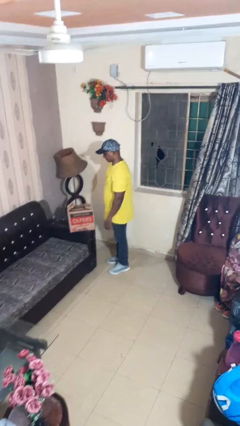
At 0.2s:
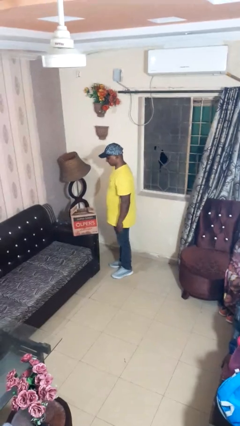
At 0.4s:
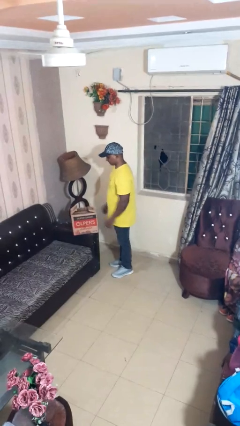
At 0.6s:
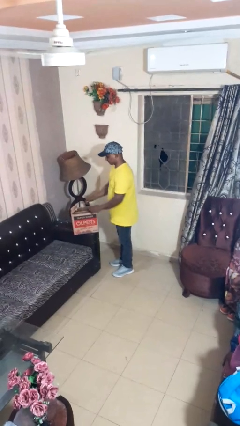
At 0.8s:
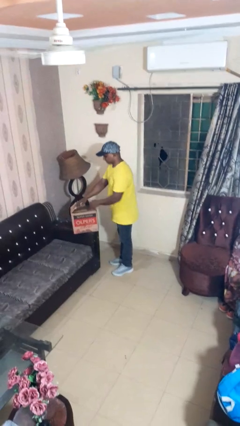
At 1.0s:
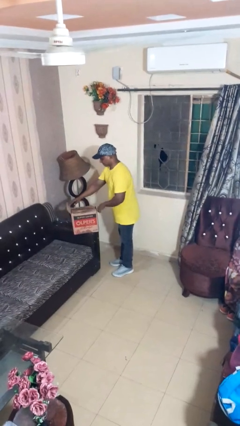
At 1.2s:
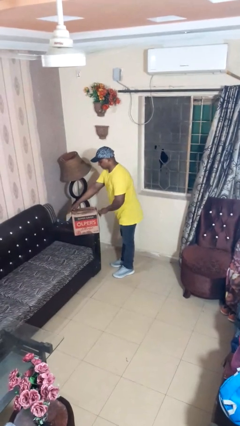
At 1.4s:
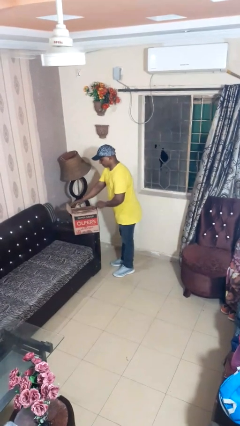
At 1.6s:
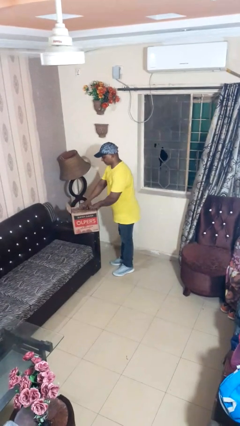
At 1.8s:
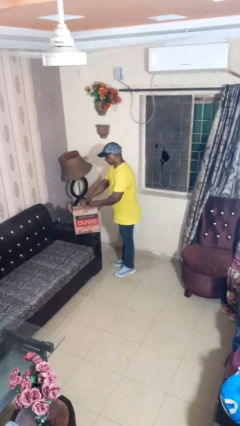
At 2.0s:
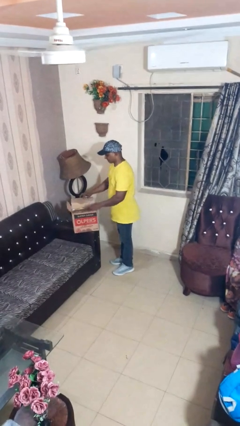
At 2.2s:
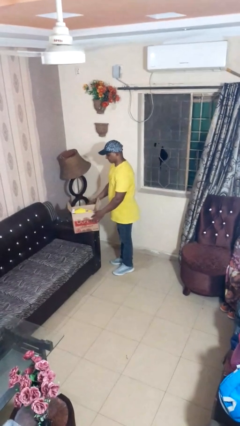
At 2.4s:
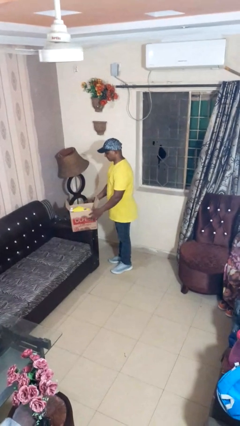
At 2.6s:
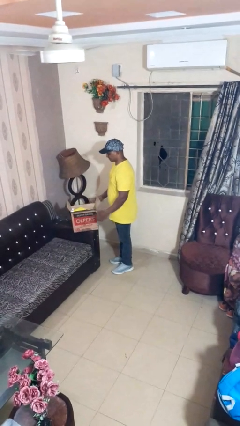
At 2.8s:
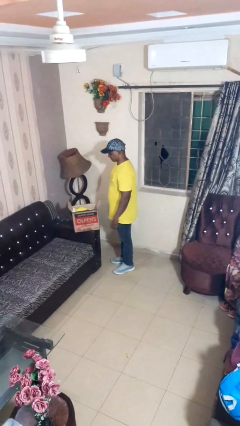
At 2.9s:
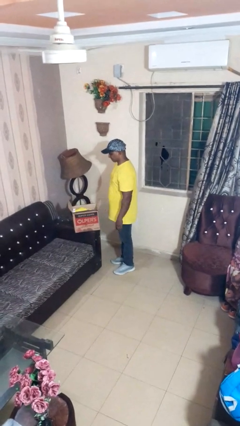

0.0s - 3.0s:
person opens box

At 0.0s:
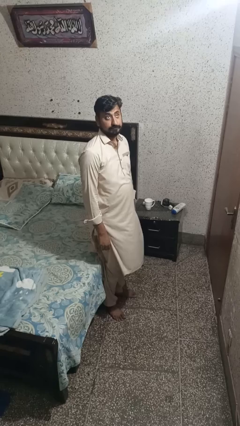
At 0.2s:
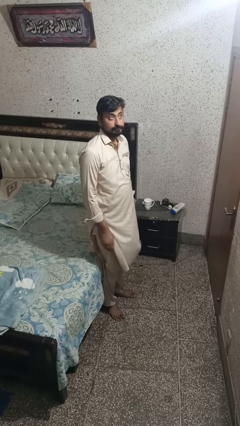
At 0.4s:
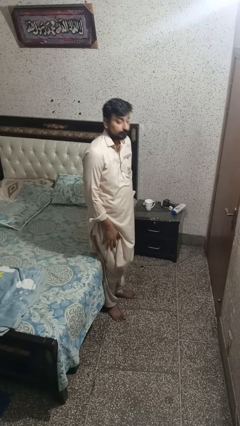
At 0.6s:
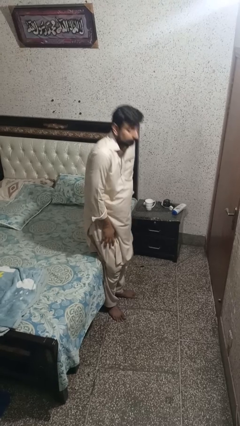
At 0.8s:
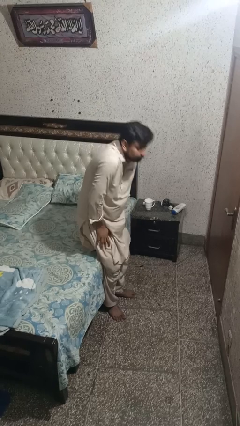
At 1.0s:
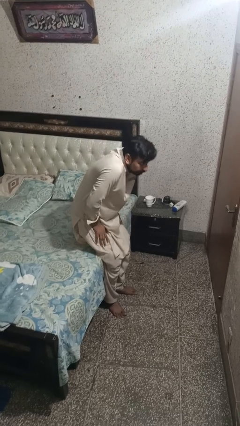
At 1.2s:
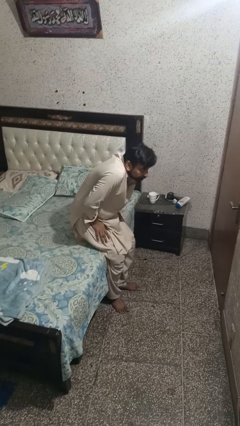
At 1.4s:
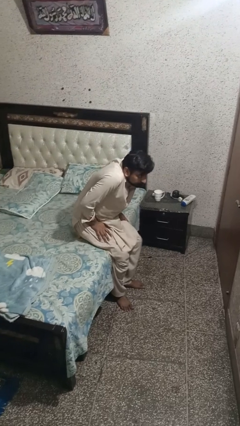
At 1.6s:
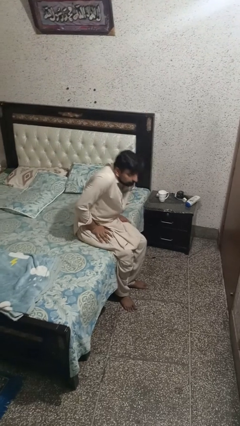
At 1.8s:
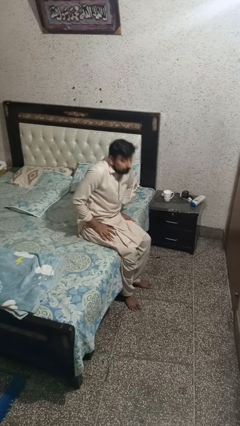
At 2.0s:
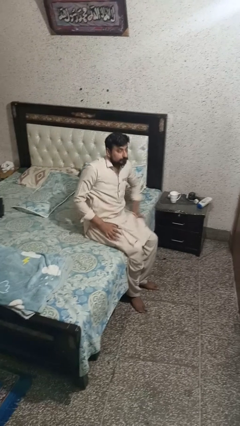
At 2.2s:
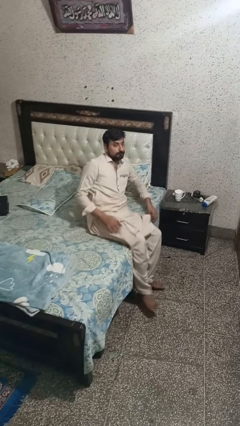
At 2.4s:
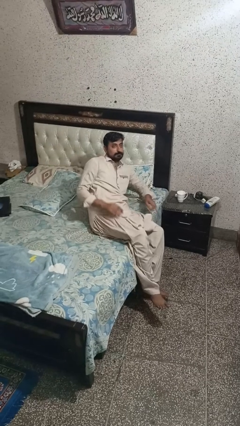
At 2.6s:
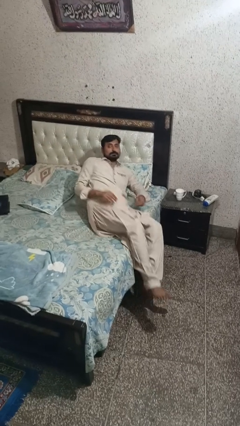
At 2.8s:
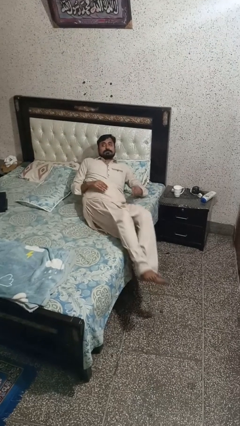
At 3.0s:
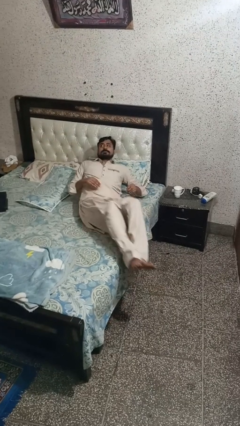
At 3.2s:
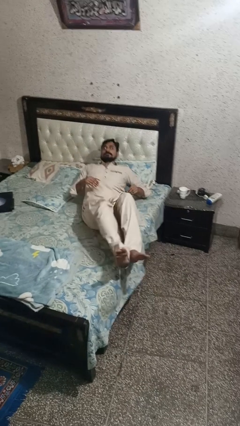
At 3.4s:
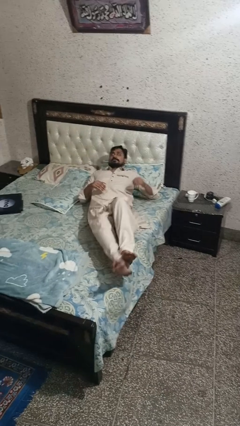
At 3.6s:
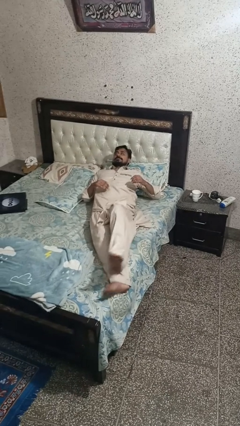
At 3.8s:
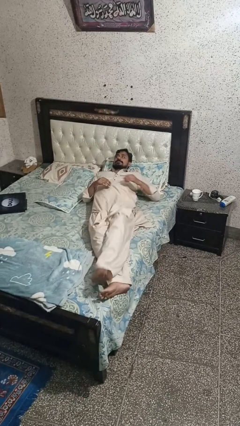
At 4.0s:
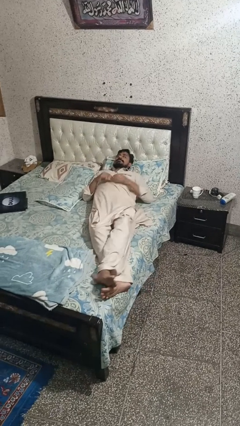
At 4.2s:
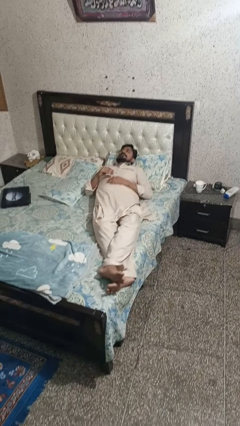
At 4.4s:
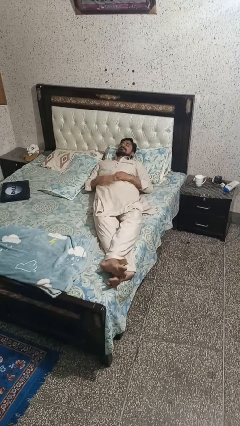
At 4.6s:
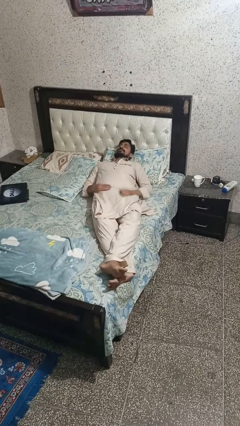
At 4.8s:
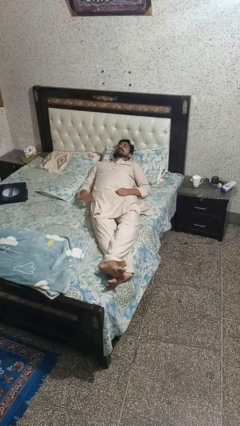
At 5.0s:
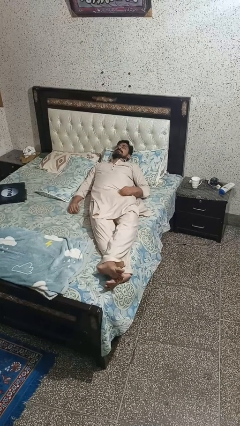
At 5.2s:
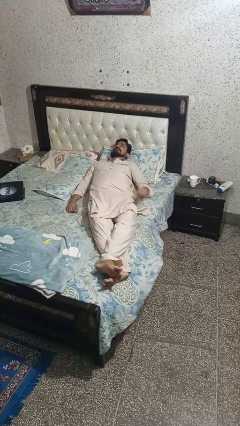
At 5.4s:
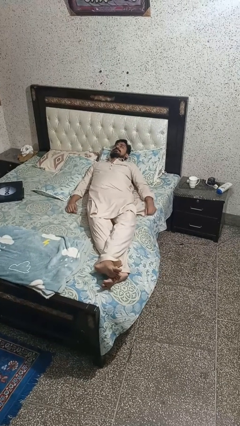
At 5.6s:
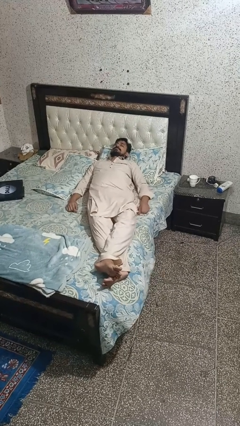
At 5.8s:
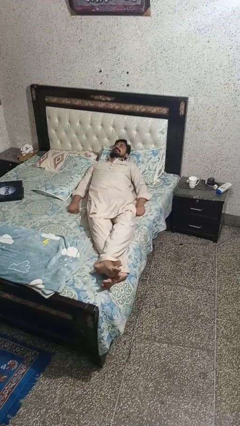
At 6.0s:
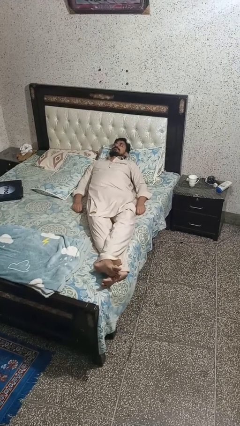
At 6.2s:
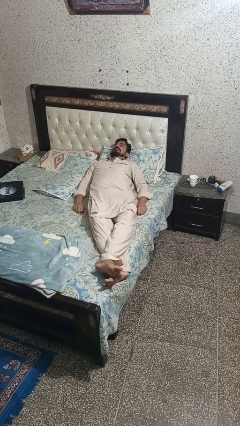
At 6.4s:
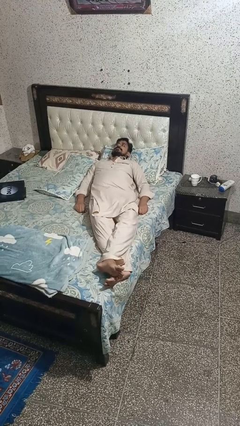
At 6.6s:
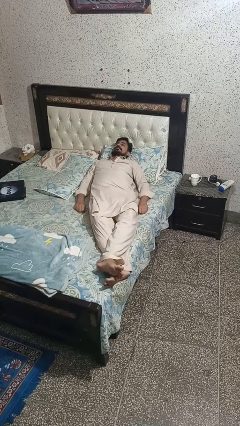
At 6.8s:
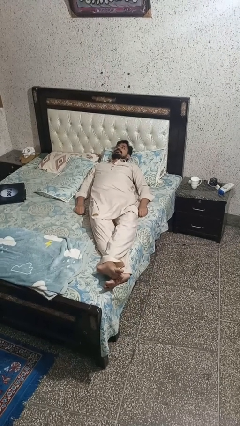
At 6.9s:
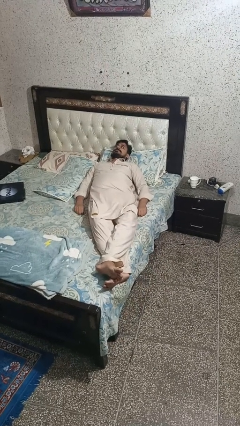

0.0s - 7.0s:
person lies down on bed

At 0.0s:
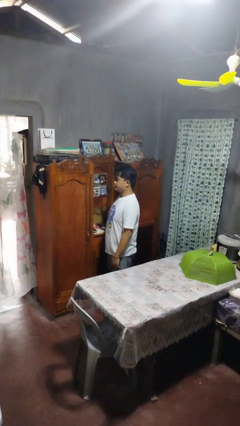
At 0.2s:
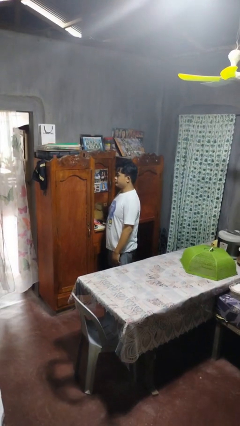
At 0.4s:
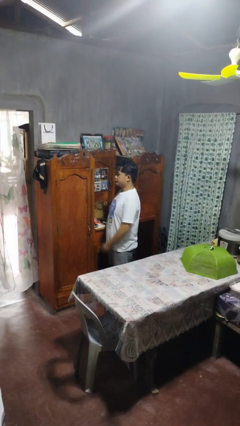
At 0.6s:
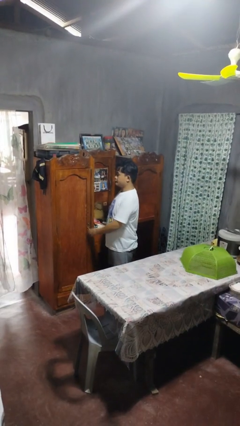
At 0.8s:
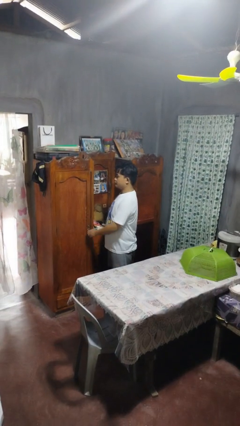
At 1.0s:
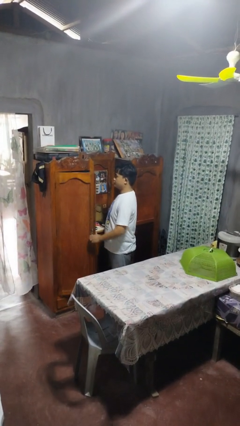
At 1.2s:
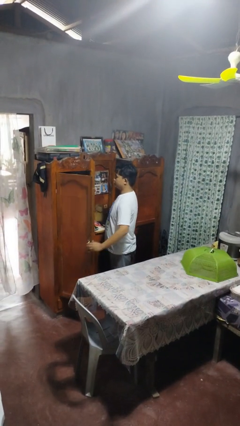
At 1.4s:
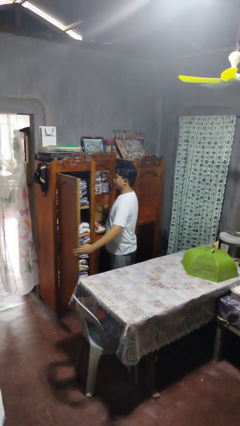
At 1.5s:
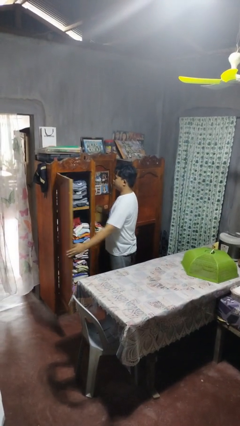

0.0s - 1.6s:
person opens closet door

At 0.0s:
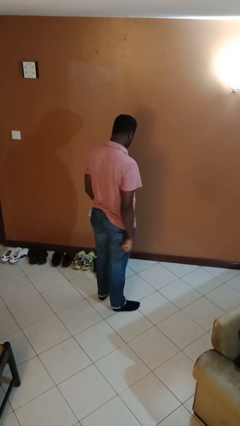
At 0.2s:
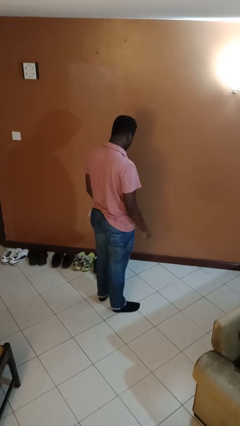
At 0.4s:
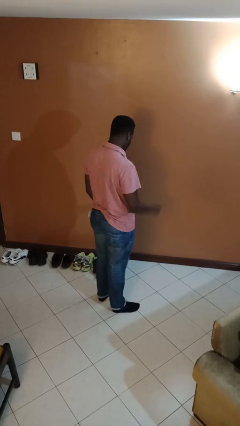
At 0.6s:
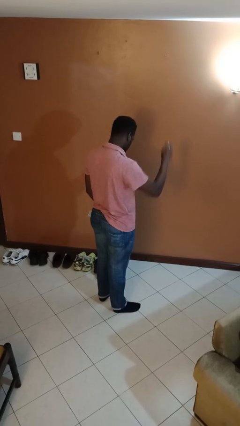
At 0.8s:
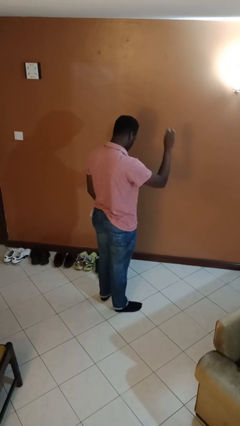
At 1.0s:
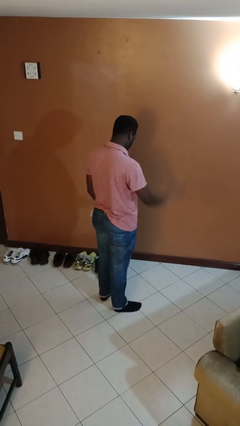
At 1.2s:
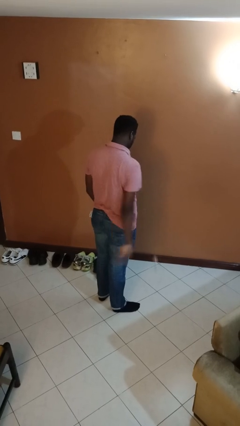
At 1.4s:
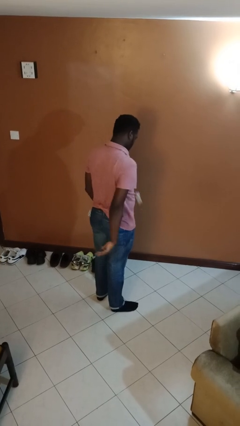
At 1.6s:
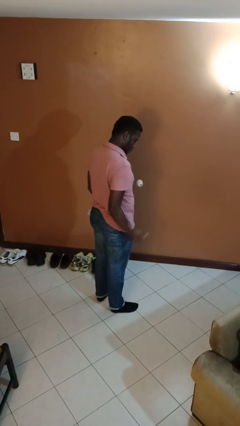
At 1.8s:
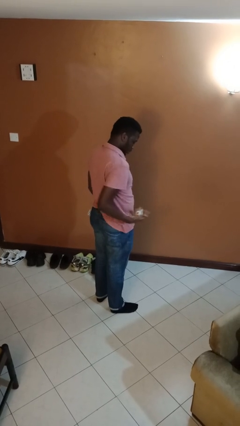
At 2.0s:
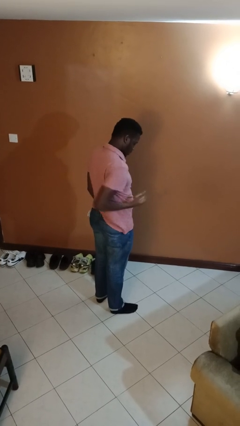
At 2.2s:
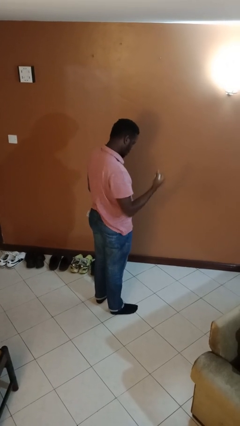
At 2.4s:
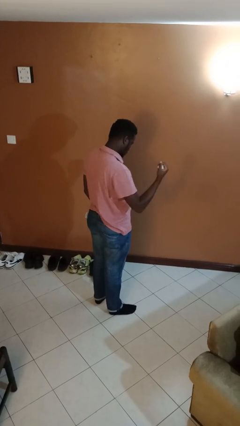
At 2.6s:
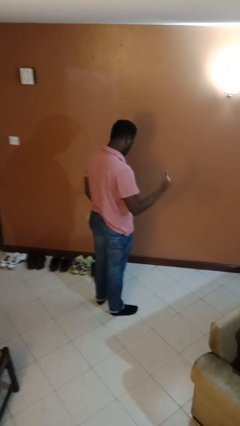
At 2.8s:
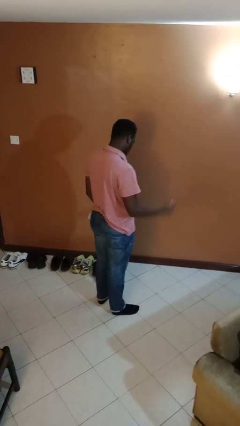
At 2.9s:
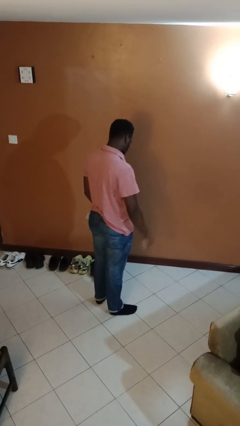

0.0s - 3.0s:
person bounces ball on floor

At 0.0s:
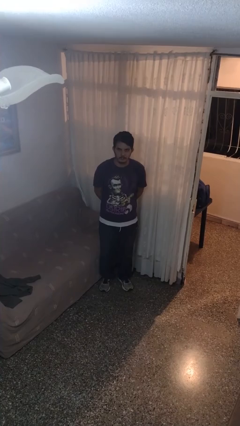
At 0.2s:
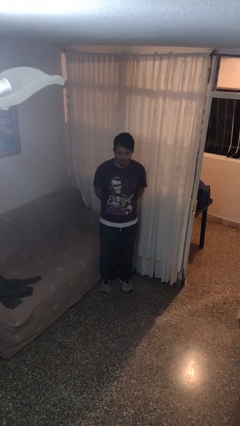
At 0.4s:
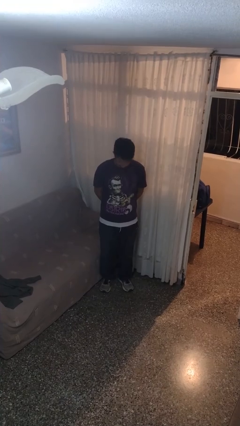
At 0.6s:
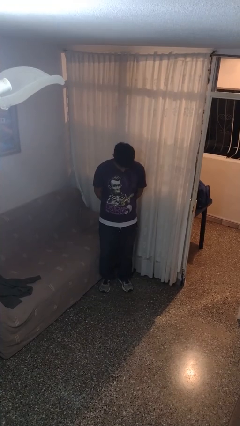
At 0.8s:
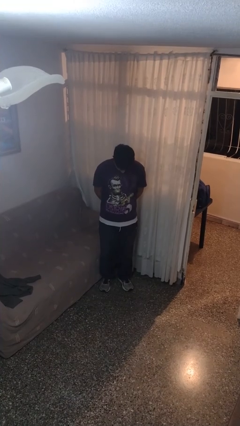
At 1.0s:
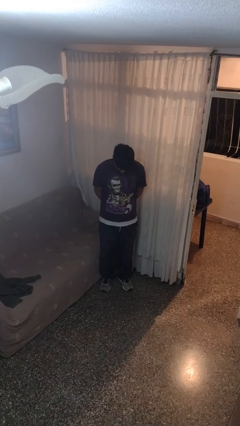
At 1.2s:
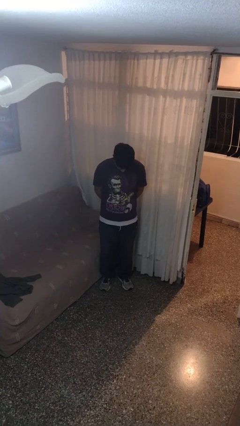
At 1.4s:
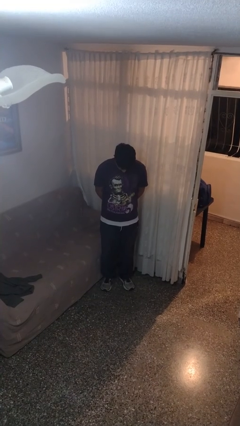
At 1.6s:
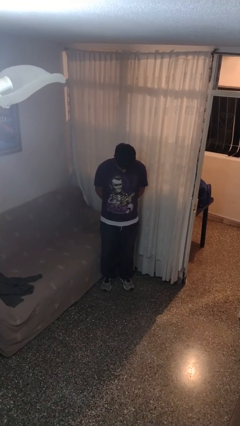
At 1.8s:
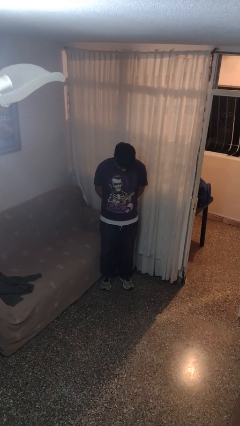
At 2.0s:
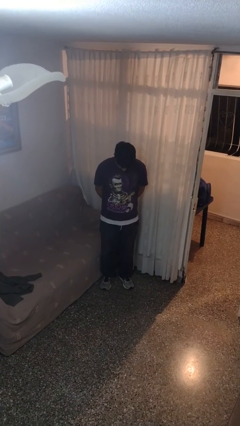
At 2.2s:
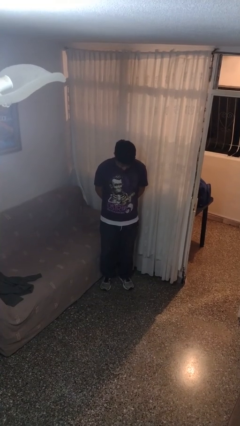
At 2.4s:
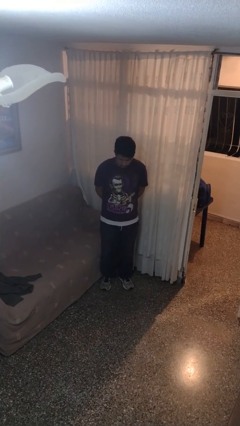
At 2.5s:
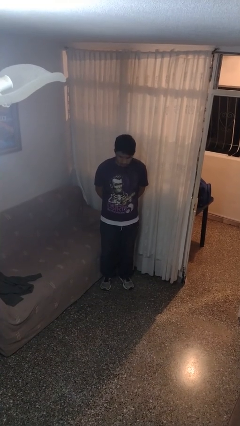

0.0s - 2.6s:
person prays
